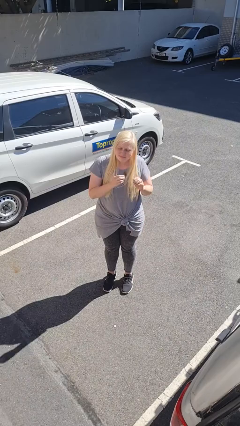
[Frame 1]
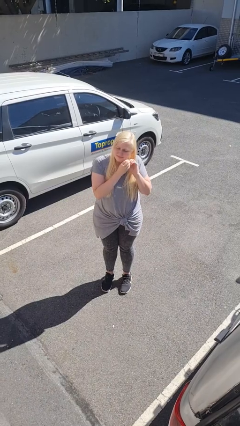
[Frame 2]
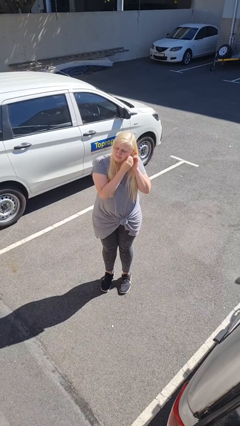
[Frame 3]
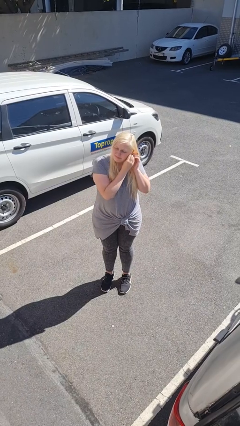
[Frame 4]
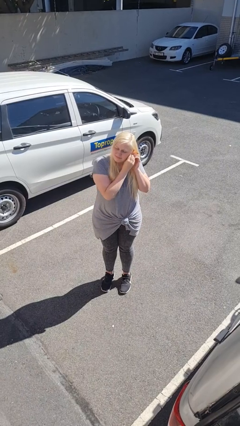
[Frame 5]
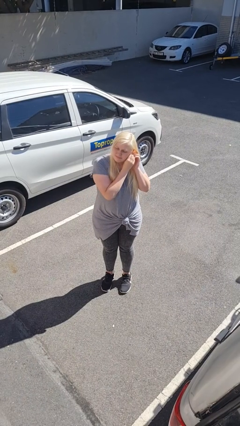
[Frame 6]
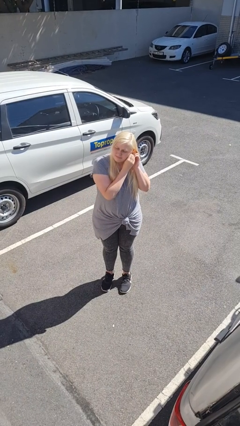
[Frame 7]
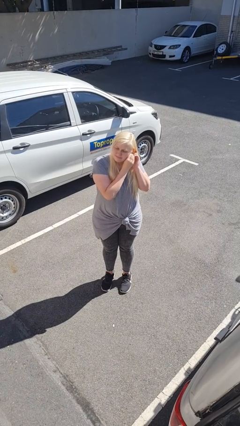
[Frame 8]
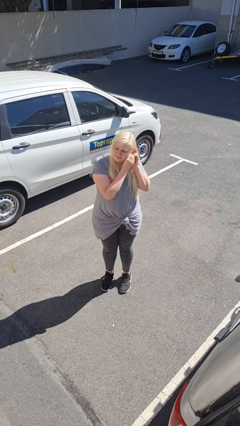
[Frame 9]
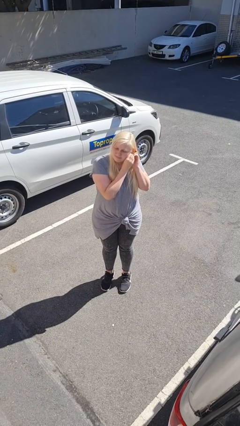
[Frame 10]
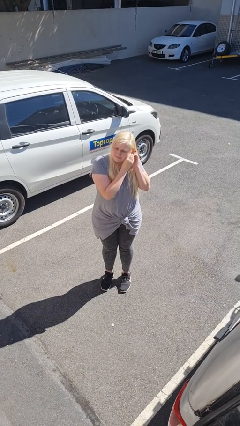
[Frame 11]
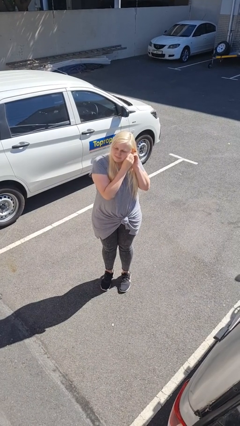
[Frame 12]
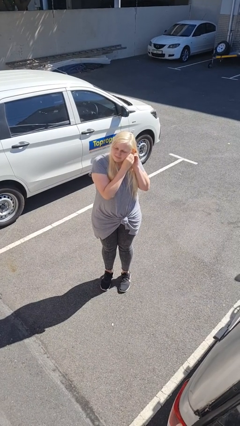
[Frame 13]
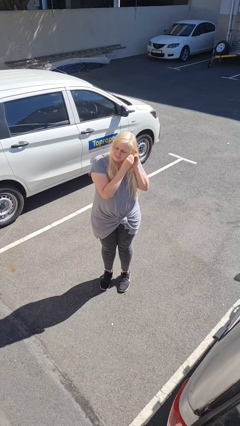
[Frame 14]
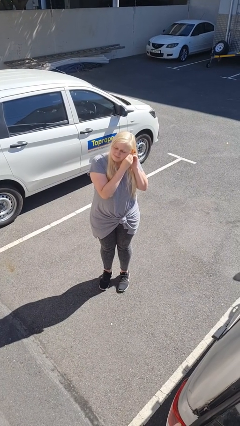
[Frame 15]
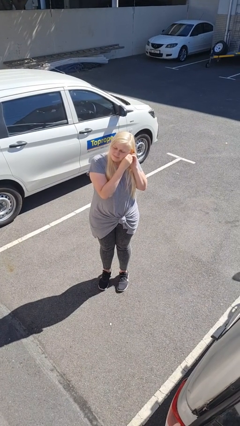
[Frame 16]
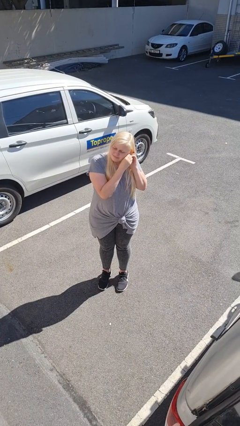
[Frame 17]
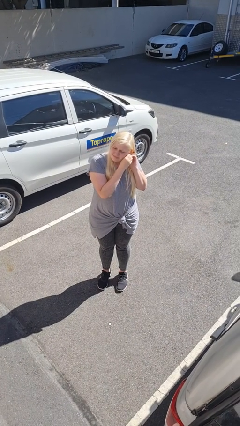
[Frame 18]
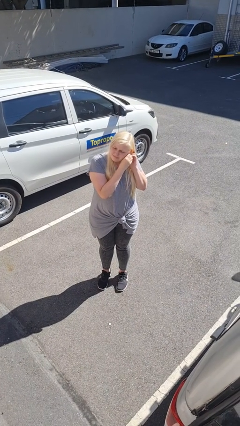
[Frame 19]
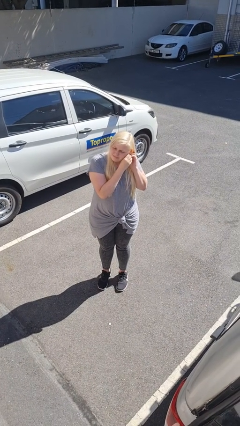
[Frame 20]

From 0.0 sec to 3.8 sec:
person puts on earrings

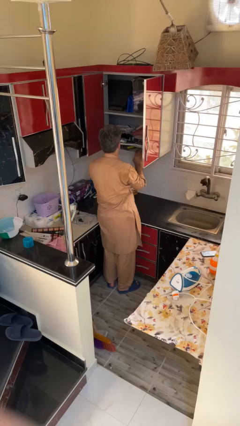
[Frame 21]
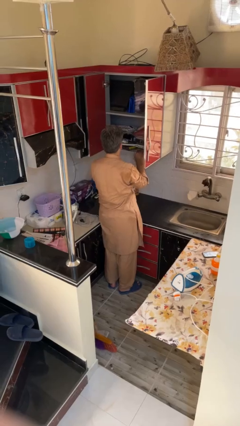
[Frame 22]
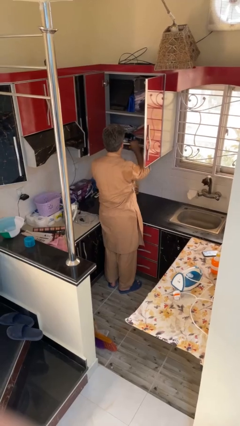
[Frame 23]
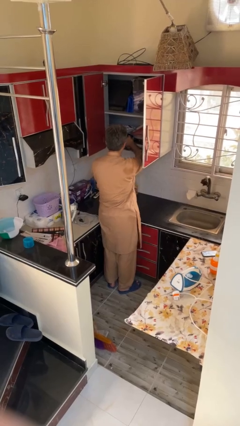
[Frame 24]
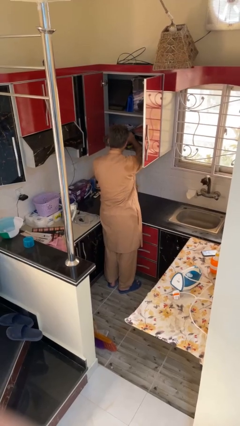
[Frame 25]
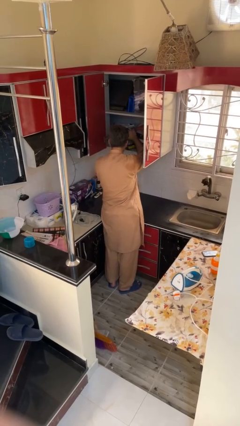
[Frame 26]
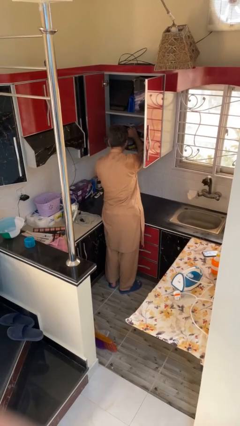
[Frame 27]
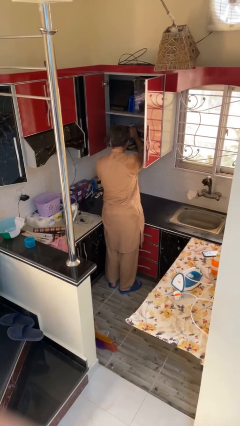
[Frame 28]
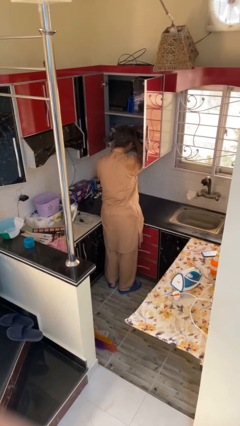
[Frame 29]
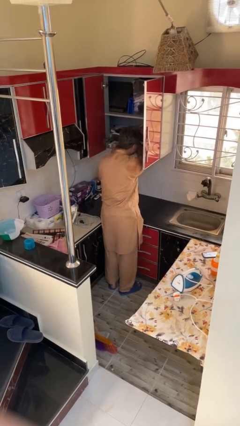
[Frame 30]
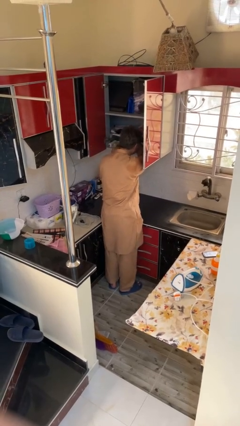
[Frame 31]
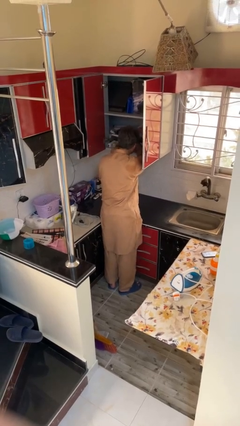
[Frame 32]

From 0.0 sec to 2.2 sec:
person searches in cabinet

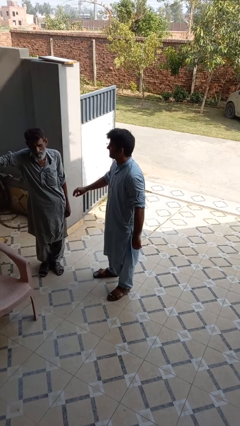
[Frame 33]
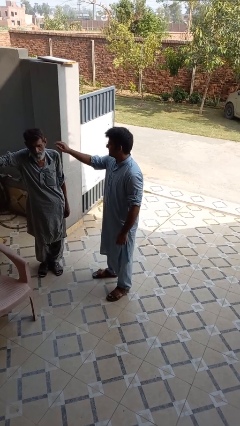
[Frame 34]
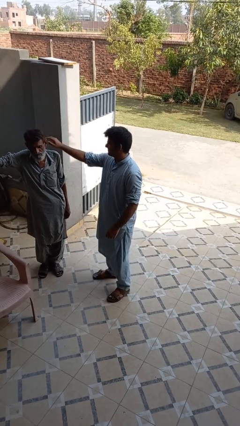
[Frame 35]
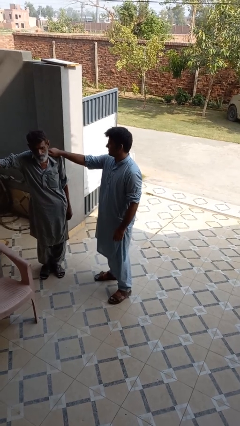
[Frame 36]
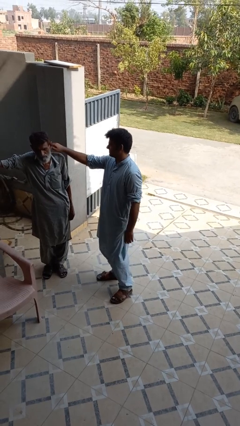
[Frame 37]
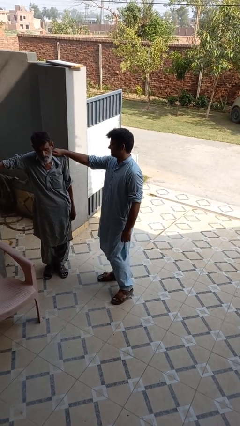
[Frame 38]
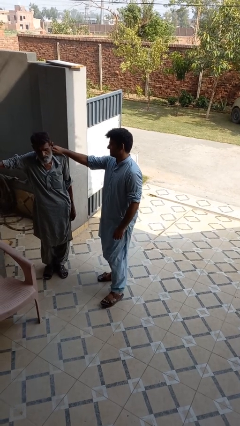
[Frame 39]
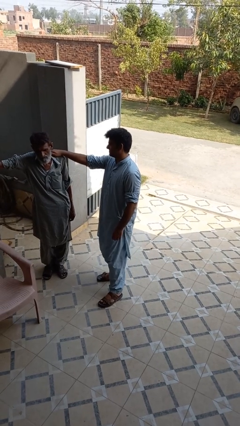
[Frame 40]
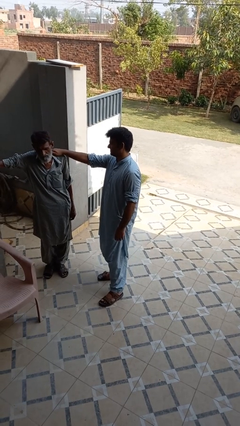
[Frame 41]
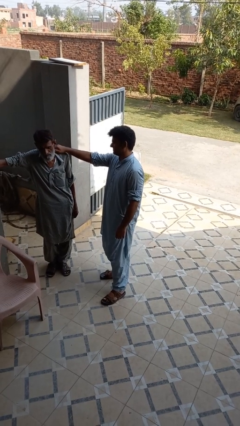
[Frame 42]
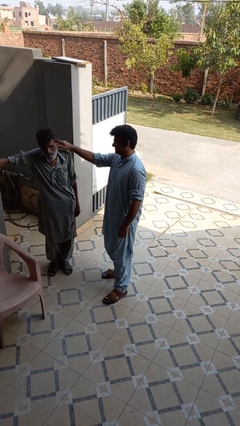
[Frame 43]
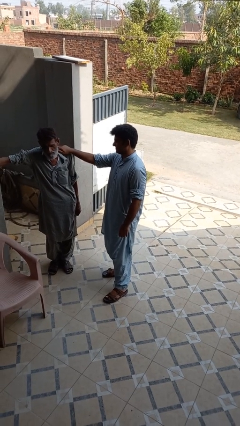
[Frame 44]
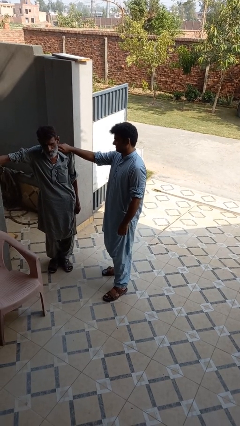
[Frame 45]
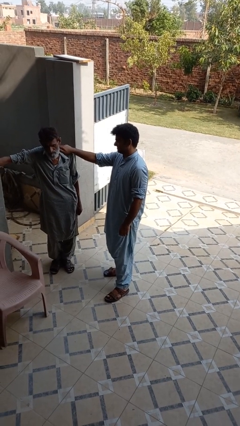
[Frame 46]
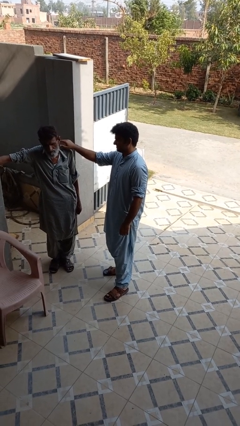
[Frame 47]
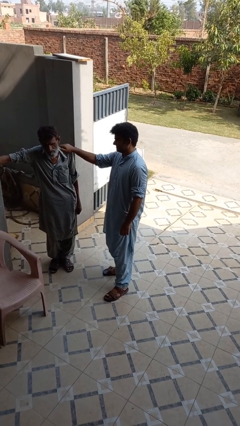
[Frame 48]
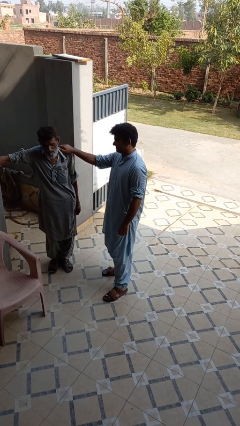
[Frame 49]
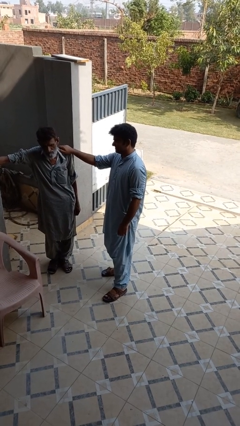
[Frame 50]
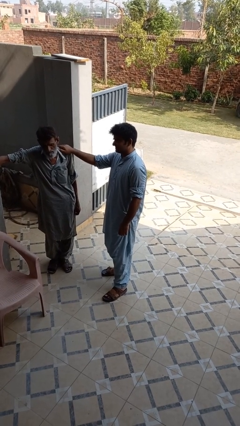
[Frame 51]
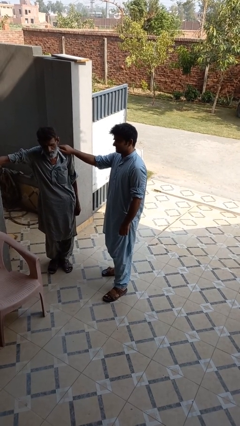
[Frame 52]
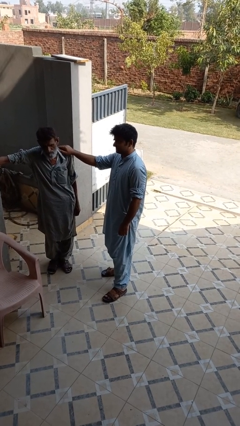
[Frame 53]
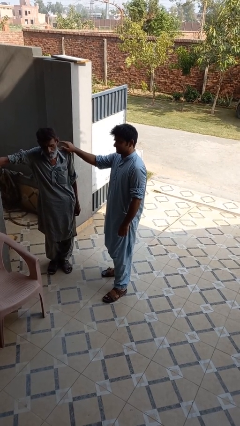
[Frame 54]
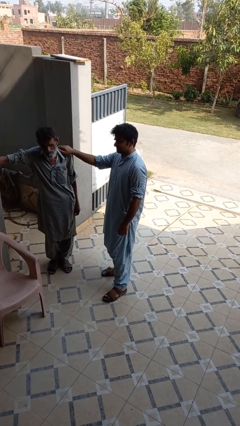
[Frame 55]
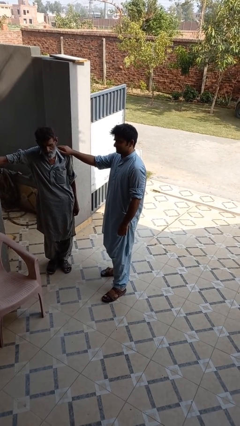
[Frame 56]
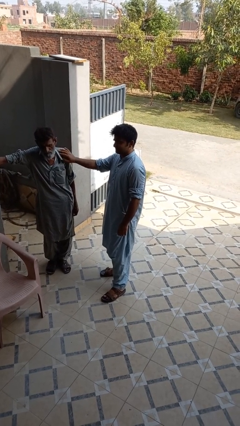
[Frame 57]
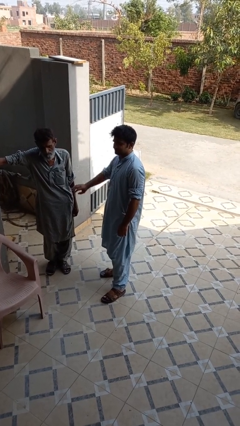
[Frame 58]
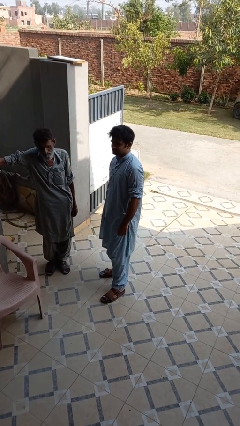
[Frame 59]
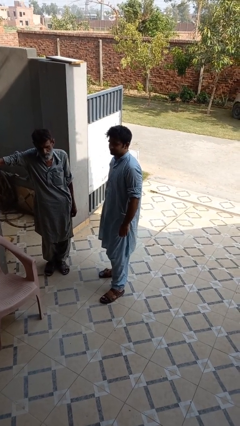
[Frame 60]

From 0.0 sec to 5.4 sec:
person pounds shoulders of person

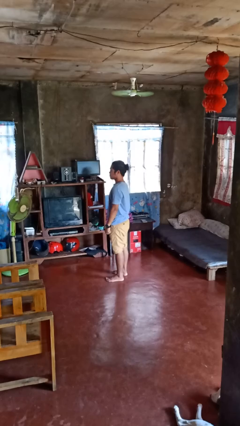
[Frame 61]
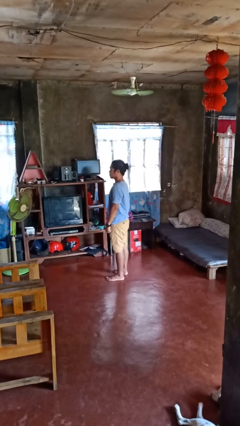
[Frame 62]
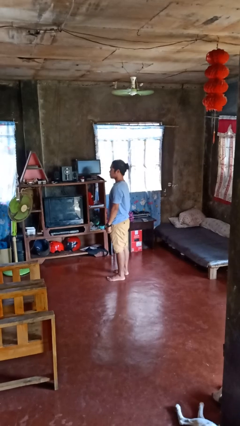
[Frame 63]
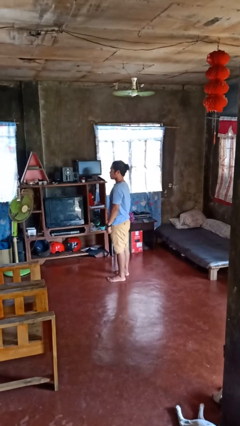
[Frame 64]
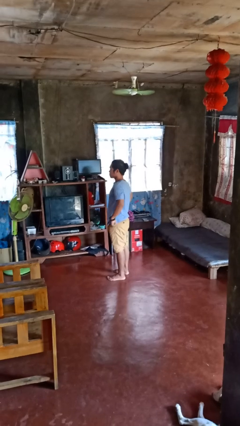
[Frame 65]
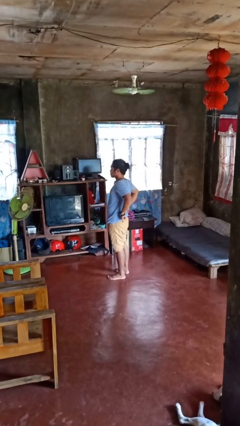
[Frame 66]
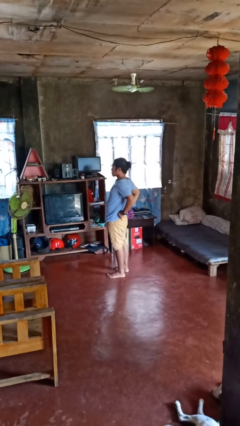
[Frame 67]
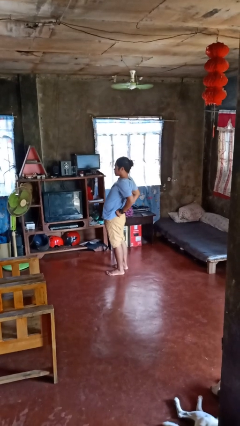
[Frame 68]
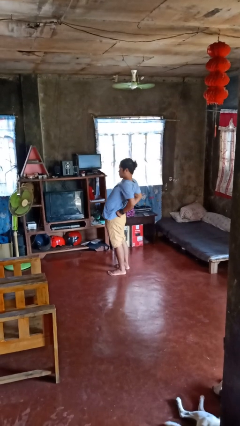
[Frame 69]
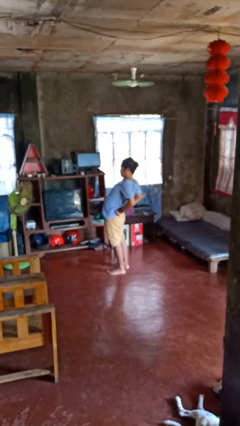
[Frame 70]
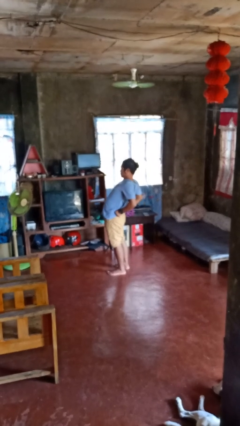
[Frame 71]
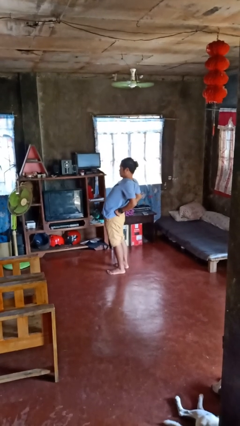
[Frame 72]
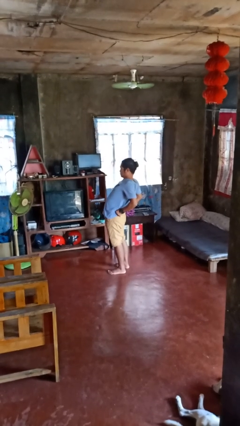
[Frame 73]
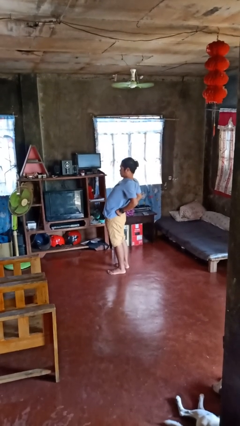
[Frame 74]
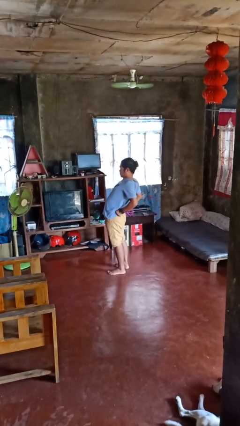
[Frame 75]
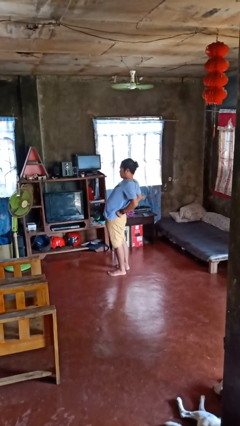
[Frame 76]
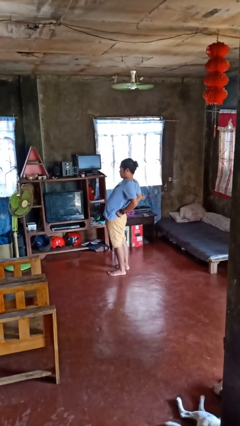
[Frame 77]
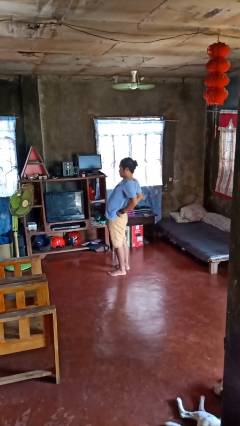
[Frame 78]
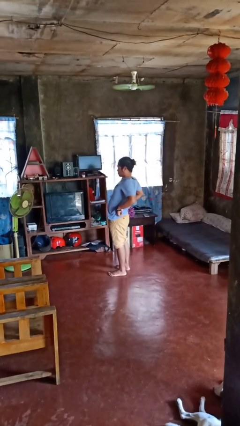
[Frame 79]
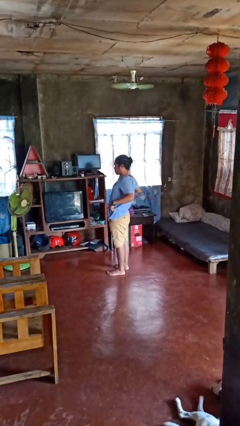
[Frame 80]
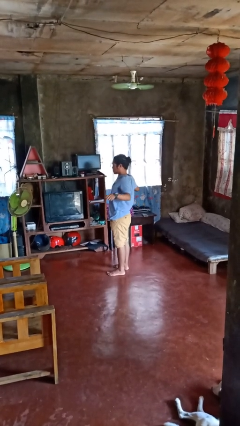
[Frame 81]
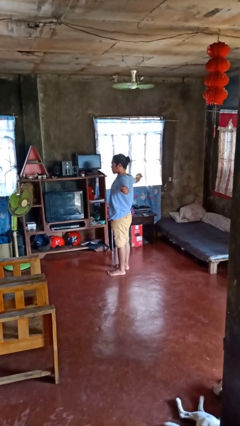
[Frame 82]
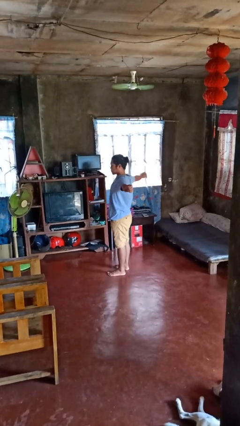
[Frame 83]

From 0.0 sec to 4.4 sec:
person stretches back

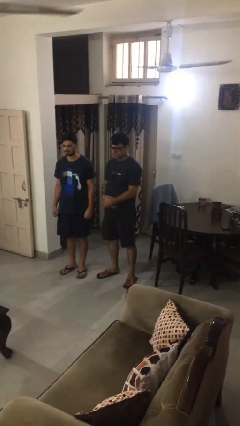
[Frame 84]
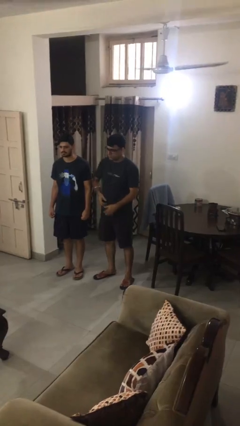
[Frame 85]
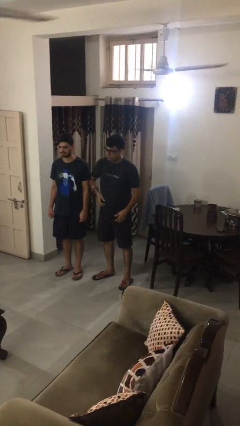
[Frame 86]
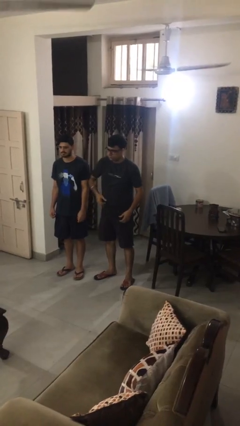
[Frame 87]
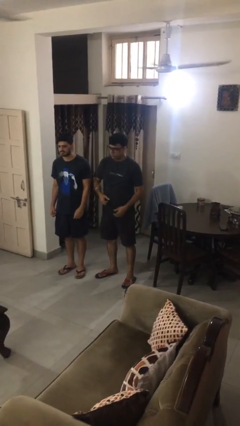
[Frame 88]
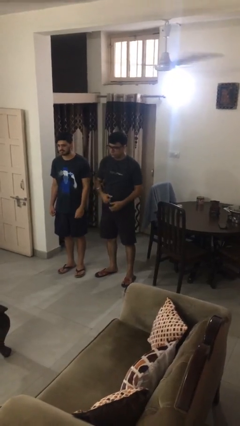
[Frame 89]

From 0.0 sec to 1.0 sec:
person nudges person with elbow

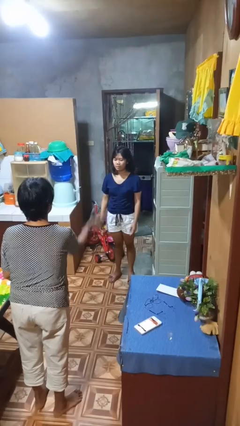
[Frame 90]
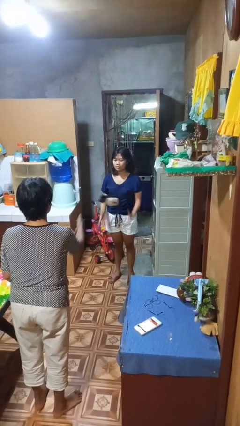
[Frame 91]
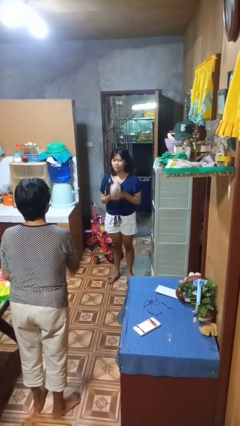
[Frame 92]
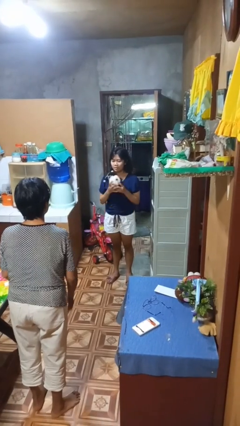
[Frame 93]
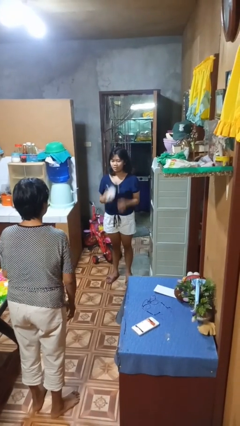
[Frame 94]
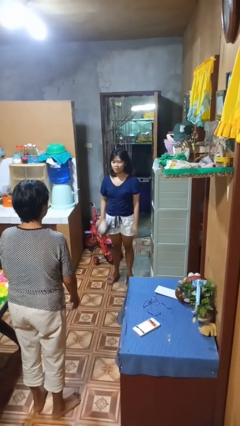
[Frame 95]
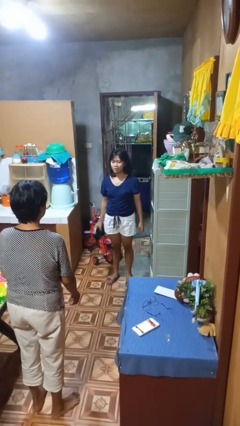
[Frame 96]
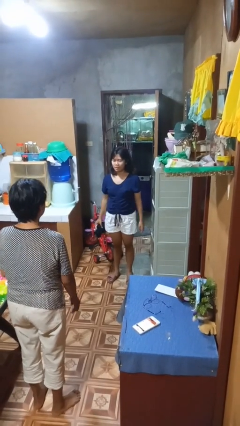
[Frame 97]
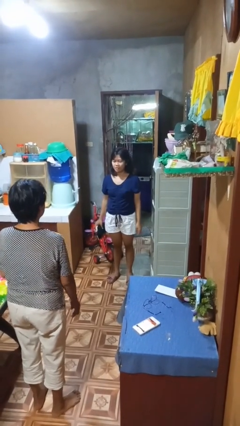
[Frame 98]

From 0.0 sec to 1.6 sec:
person catches object from person
